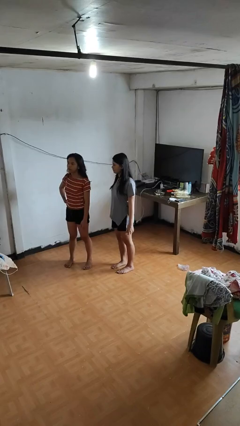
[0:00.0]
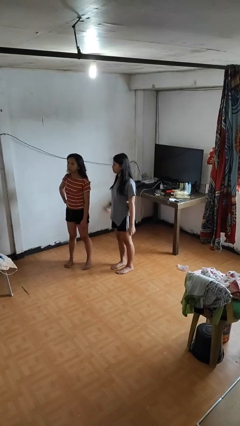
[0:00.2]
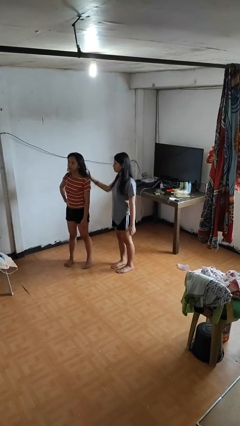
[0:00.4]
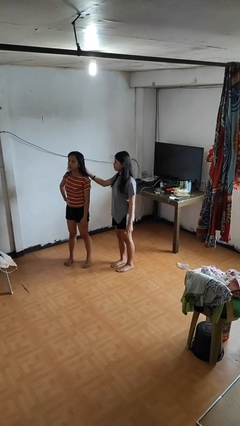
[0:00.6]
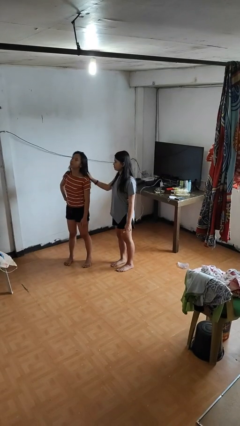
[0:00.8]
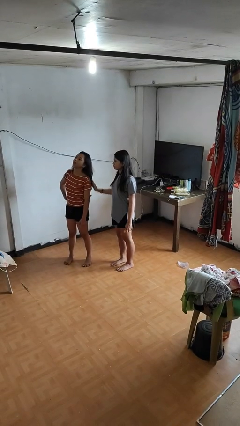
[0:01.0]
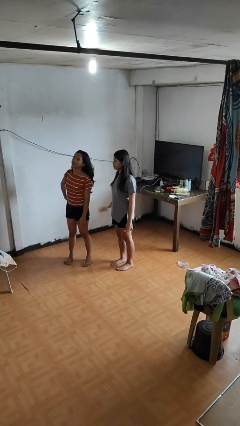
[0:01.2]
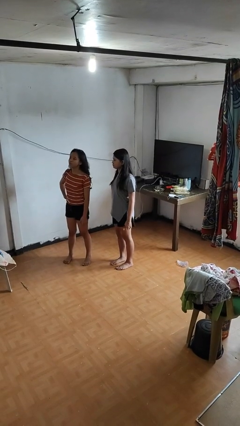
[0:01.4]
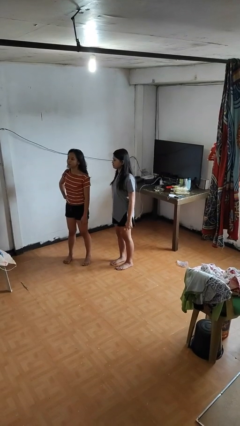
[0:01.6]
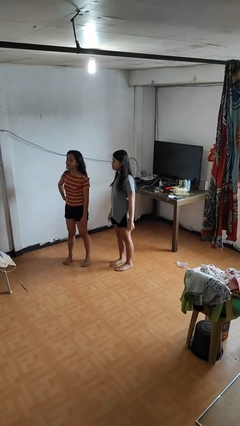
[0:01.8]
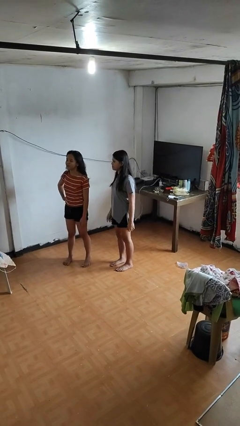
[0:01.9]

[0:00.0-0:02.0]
person grabs person by hair

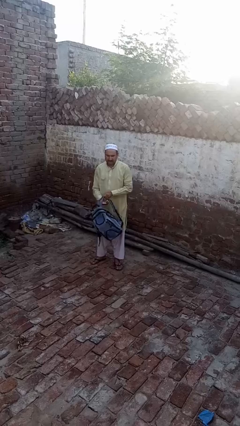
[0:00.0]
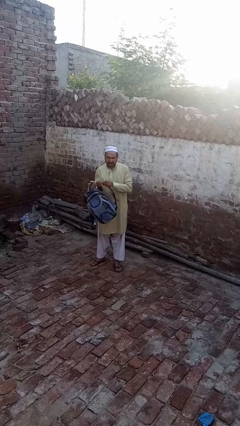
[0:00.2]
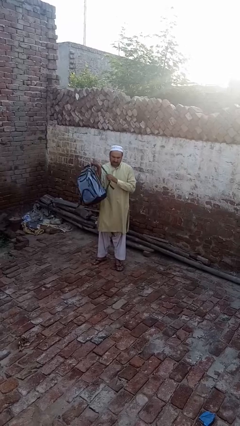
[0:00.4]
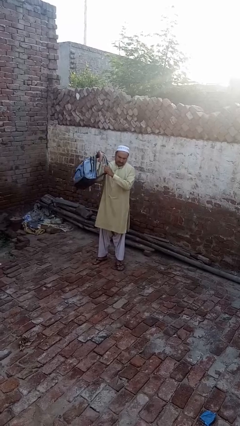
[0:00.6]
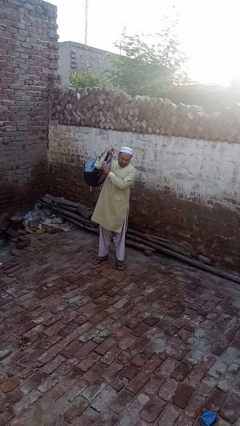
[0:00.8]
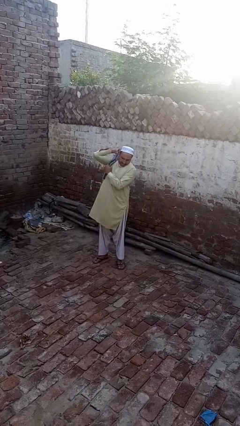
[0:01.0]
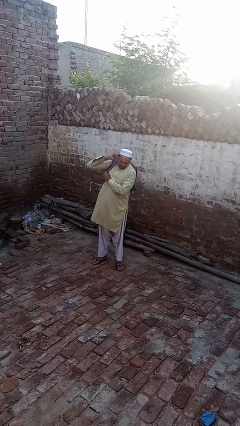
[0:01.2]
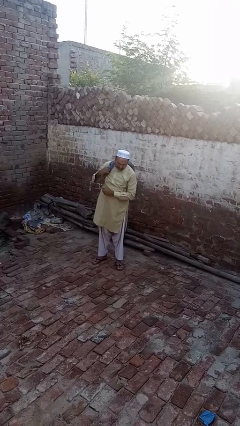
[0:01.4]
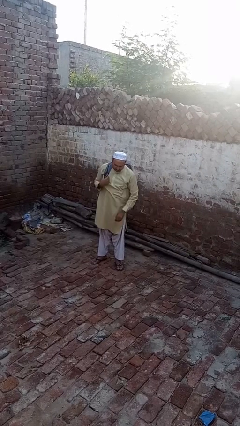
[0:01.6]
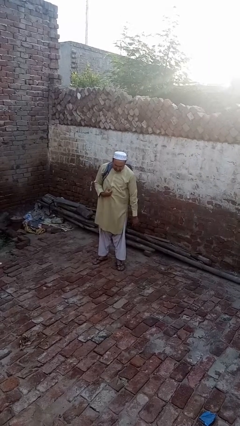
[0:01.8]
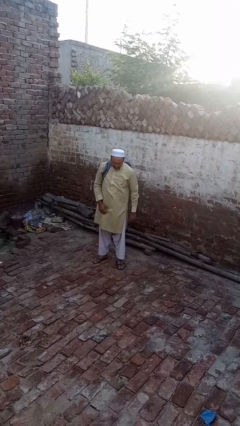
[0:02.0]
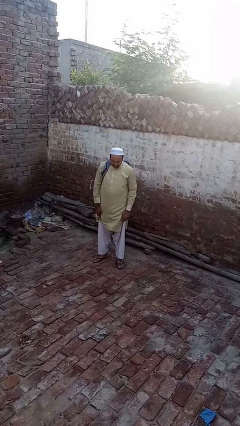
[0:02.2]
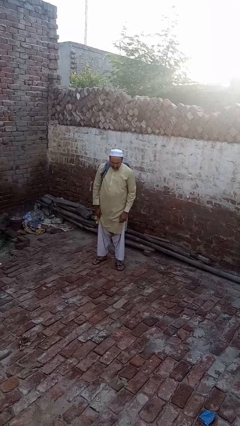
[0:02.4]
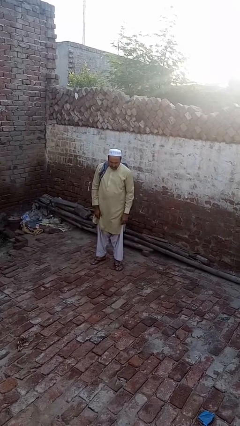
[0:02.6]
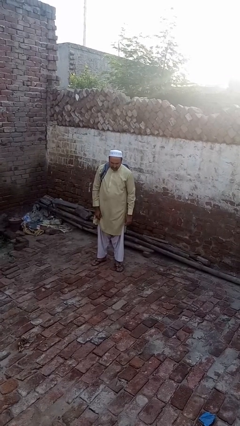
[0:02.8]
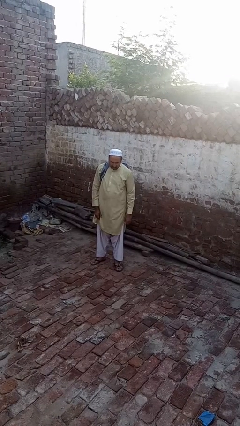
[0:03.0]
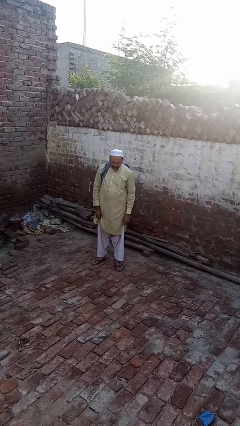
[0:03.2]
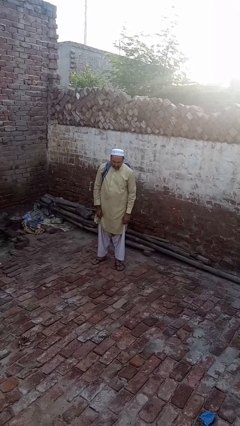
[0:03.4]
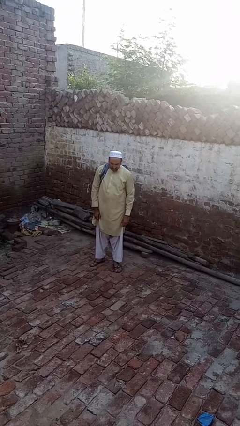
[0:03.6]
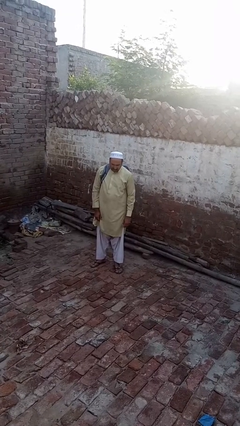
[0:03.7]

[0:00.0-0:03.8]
person puts on backpack

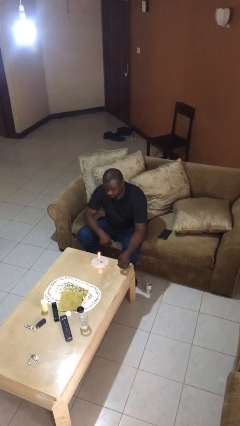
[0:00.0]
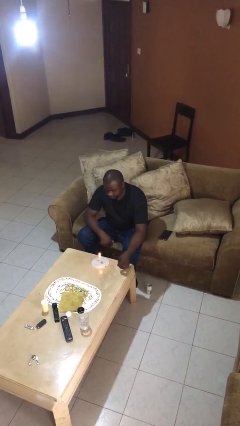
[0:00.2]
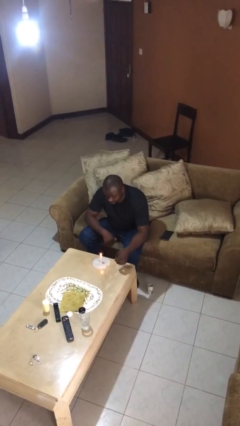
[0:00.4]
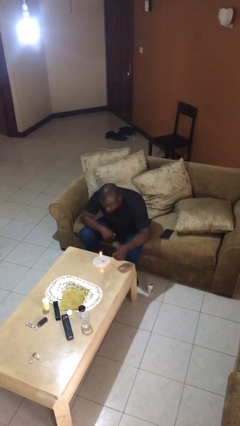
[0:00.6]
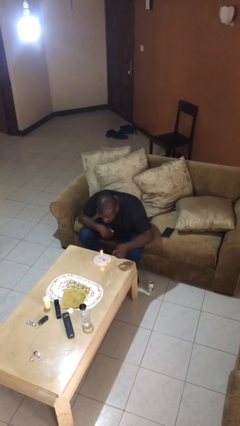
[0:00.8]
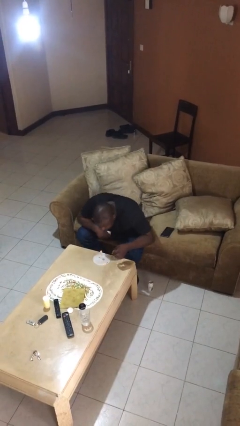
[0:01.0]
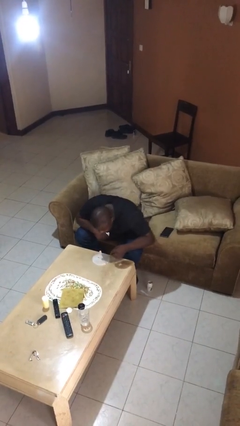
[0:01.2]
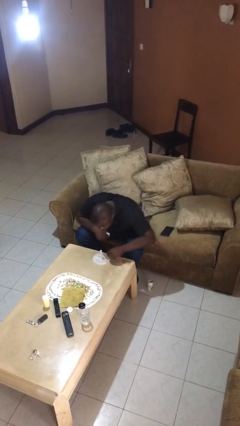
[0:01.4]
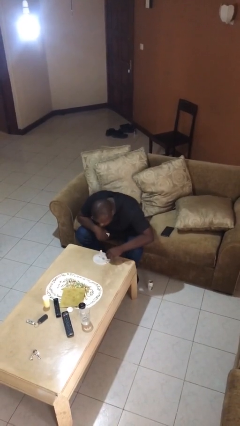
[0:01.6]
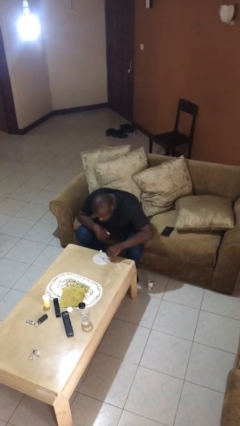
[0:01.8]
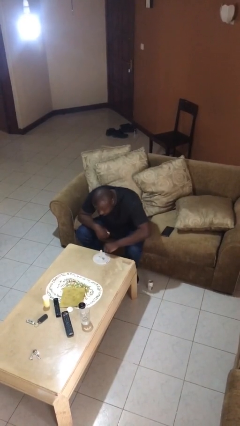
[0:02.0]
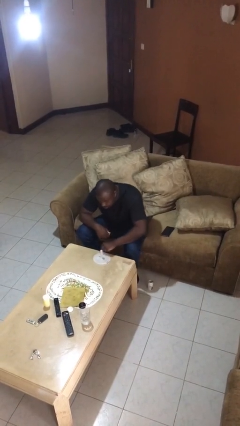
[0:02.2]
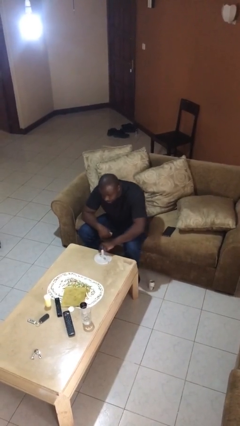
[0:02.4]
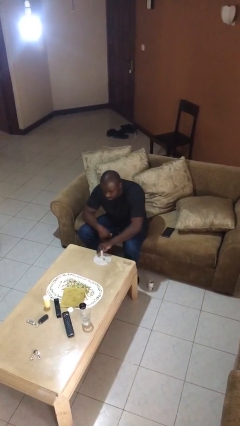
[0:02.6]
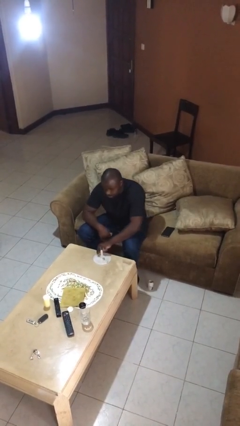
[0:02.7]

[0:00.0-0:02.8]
person extinguishes candle

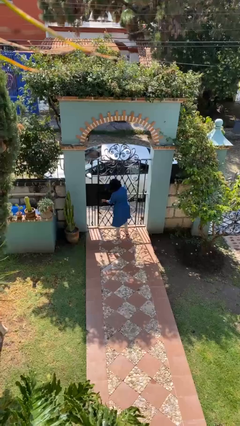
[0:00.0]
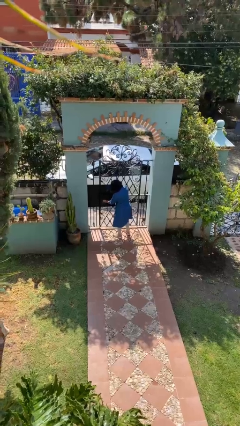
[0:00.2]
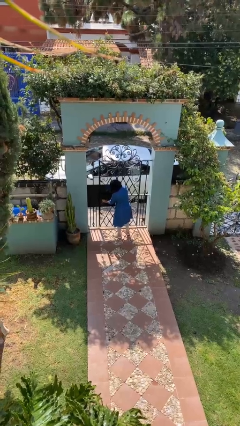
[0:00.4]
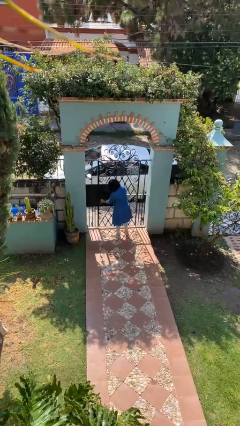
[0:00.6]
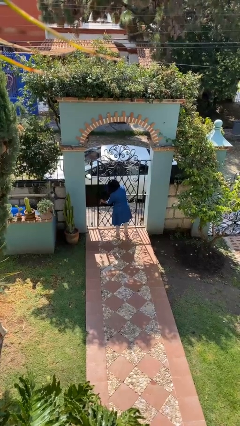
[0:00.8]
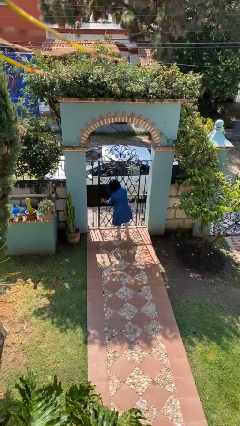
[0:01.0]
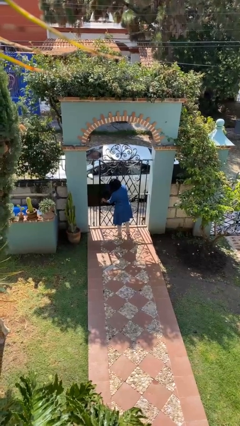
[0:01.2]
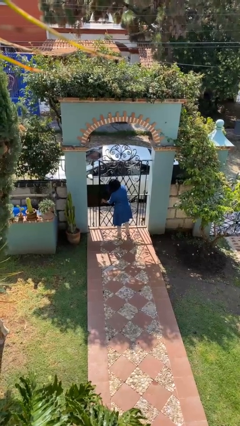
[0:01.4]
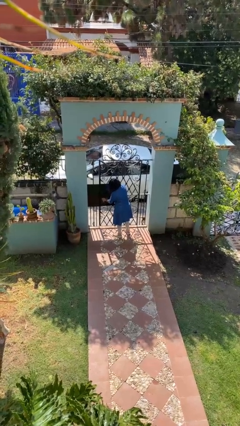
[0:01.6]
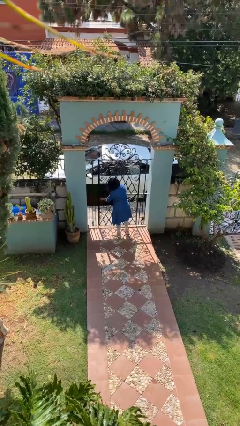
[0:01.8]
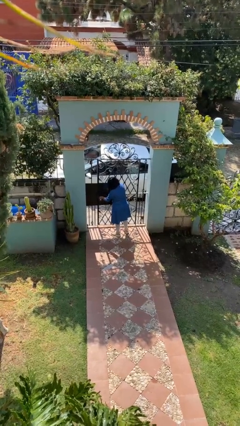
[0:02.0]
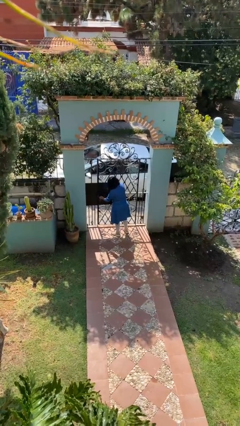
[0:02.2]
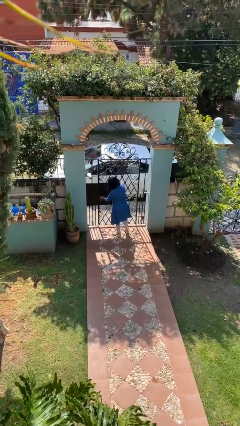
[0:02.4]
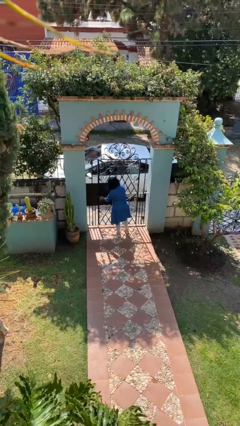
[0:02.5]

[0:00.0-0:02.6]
person locks door with keys

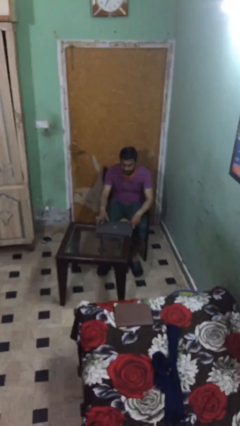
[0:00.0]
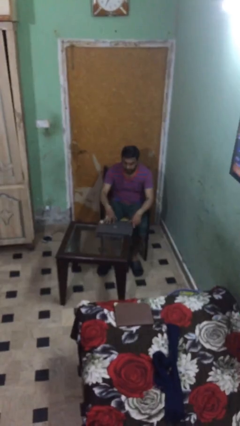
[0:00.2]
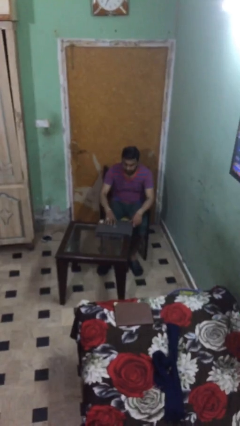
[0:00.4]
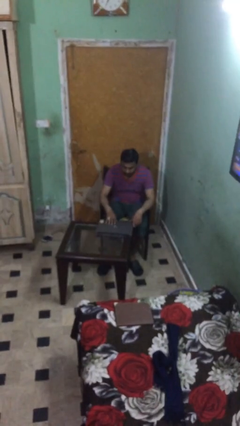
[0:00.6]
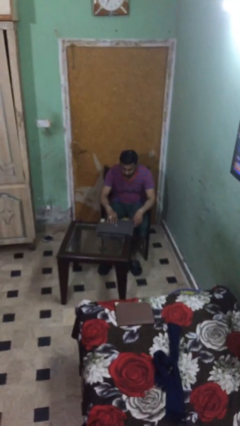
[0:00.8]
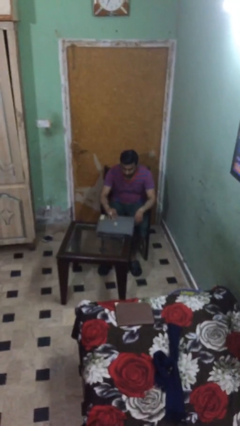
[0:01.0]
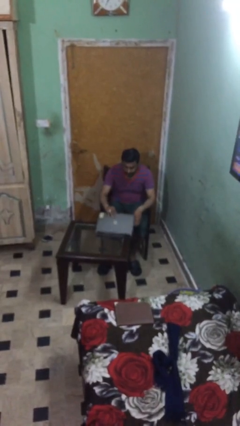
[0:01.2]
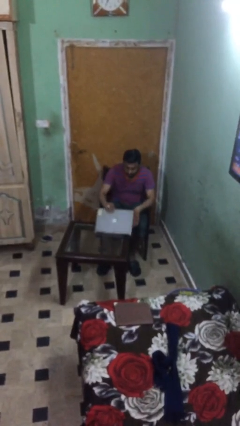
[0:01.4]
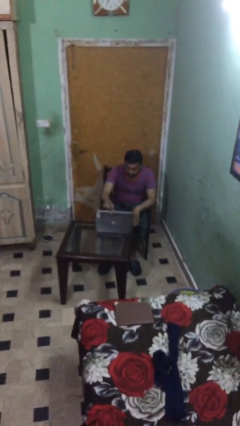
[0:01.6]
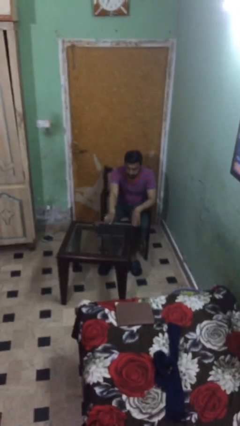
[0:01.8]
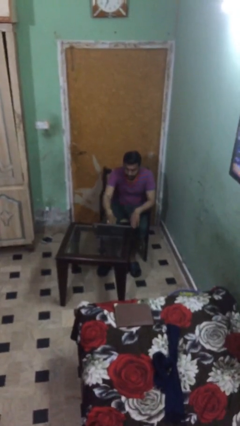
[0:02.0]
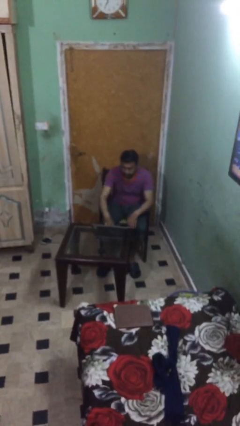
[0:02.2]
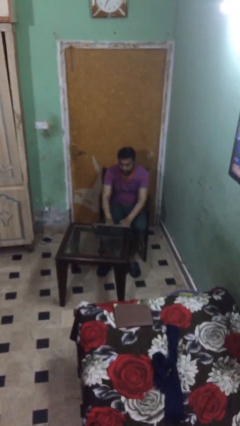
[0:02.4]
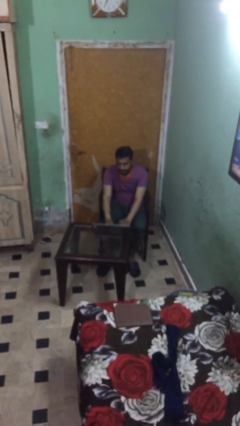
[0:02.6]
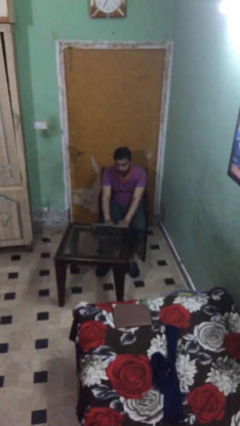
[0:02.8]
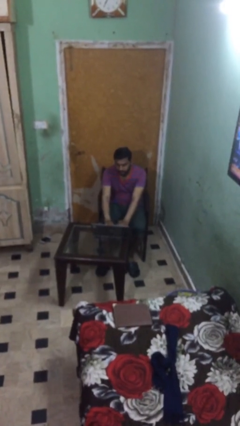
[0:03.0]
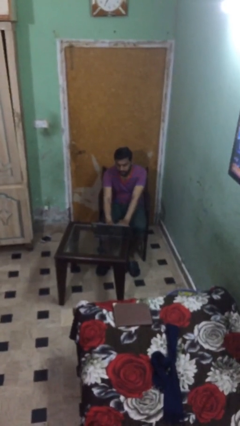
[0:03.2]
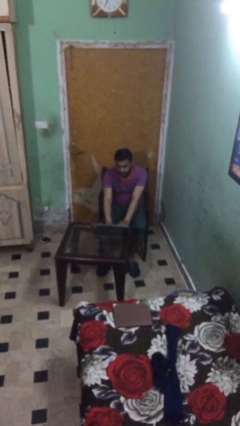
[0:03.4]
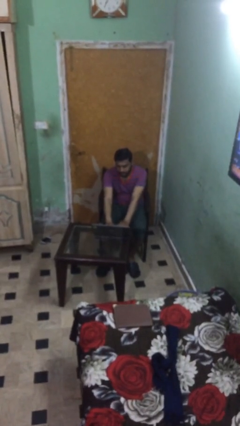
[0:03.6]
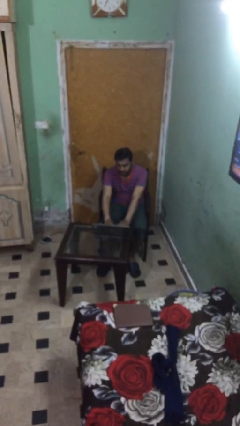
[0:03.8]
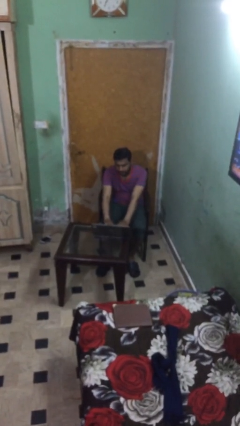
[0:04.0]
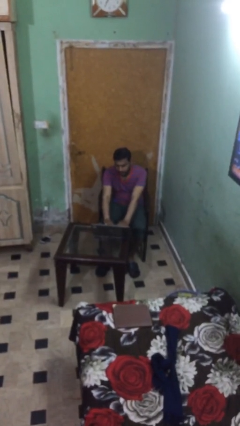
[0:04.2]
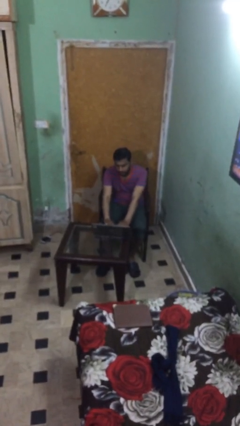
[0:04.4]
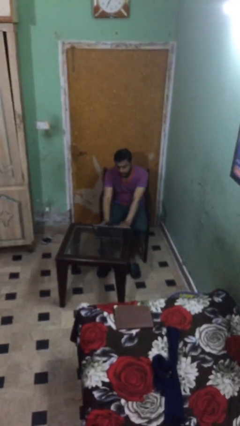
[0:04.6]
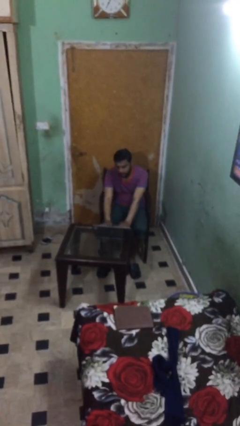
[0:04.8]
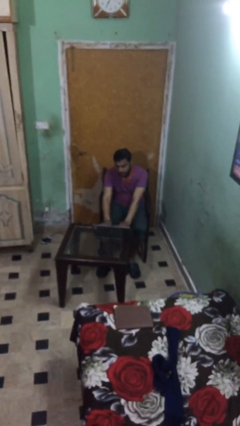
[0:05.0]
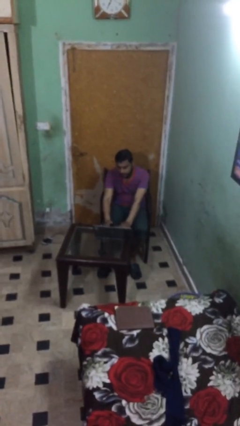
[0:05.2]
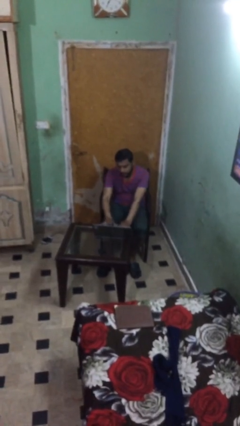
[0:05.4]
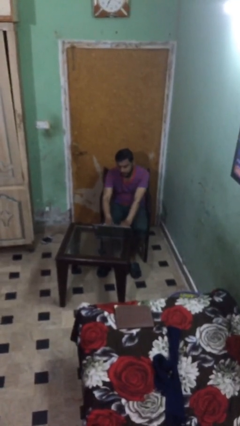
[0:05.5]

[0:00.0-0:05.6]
person interacts with laptop

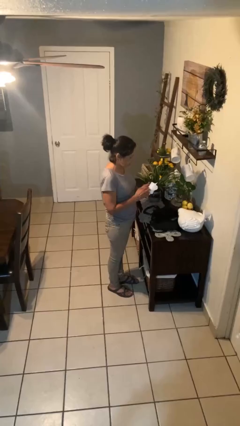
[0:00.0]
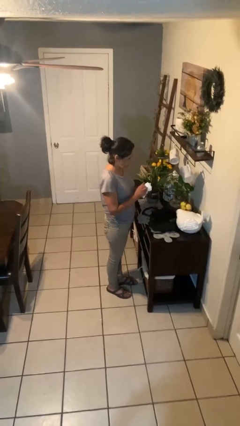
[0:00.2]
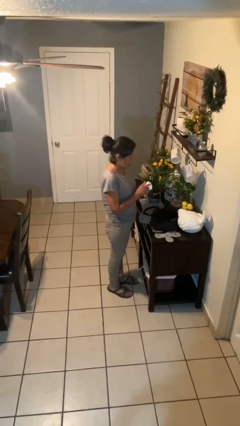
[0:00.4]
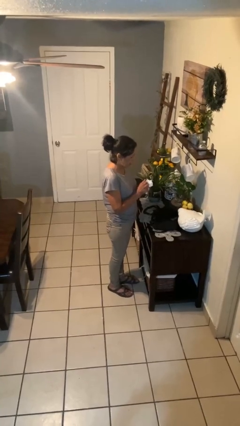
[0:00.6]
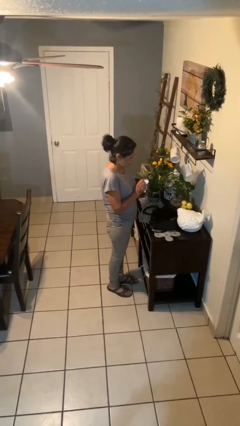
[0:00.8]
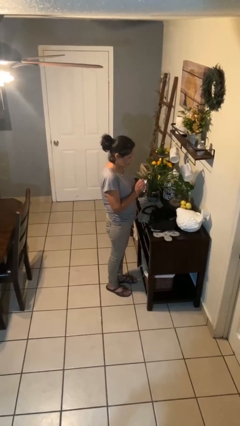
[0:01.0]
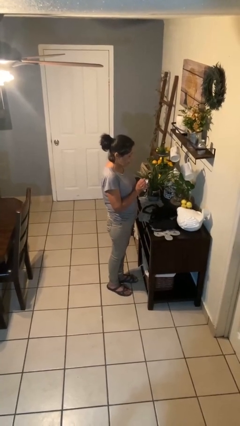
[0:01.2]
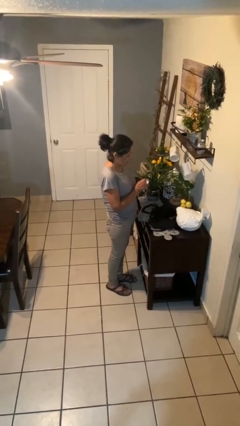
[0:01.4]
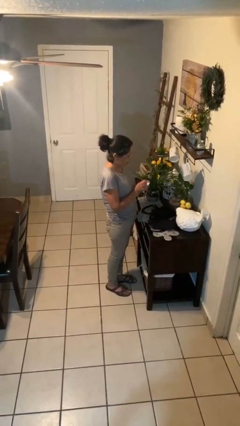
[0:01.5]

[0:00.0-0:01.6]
person crumples paper
